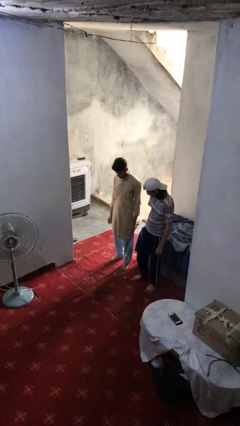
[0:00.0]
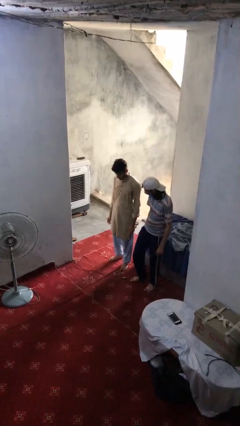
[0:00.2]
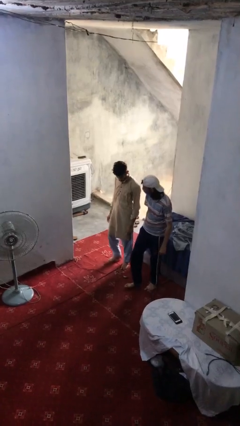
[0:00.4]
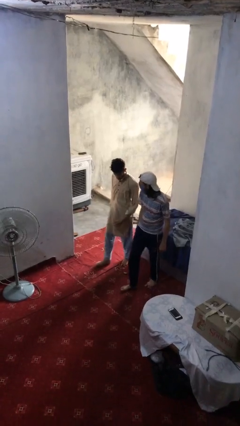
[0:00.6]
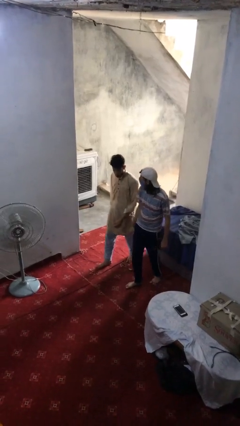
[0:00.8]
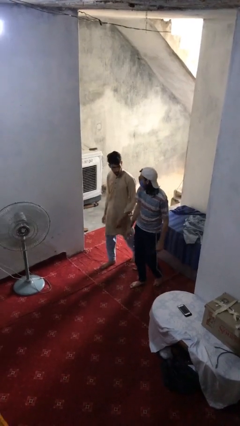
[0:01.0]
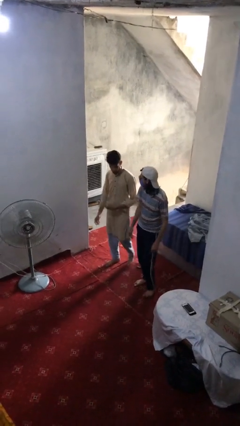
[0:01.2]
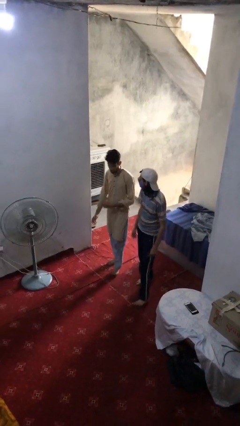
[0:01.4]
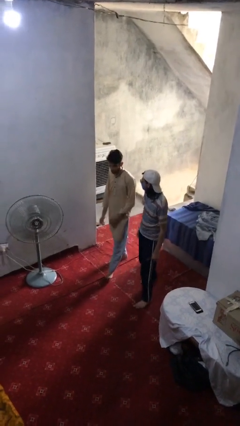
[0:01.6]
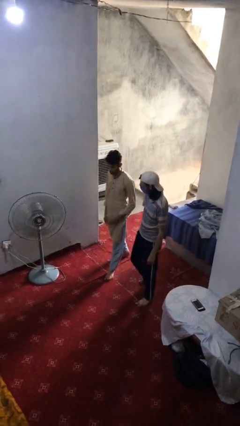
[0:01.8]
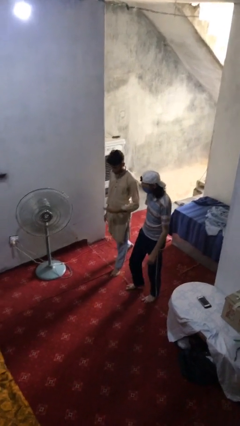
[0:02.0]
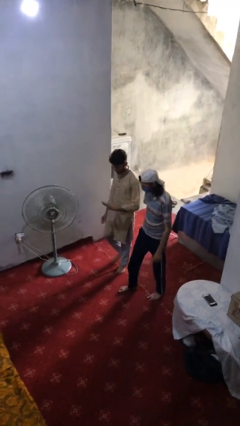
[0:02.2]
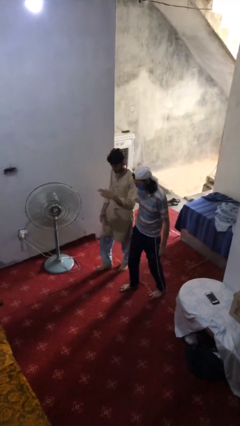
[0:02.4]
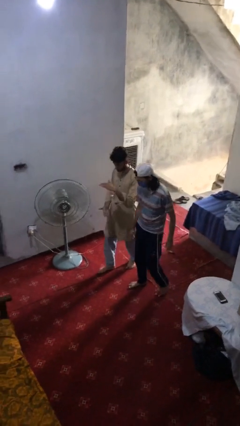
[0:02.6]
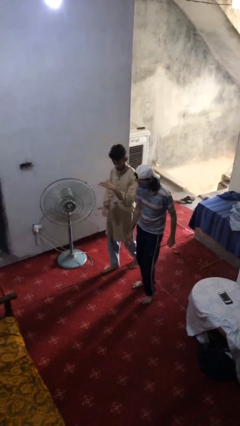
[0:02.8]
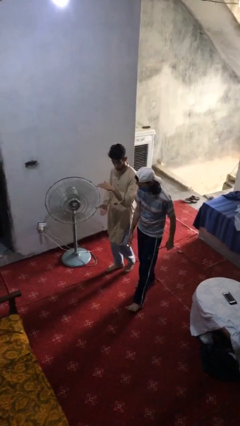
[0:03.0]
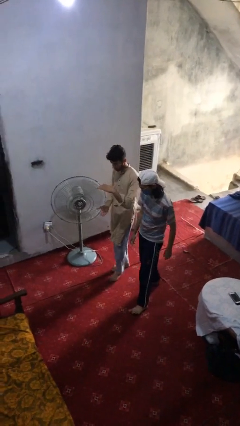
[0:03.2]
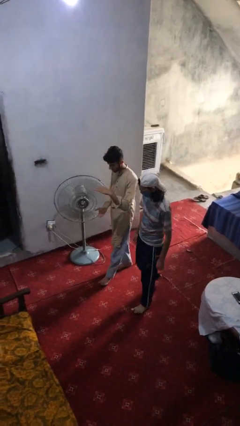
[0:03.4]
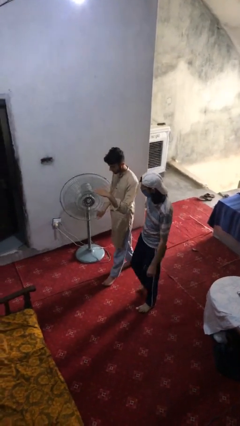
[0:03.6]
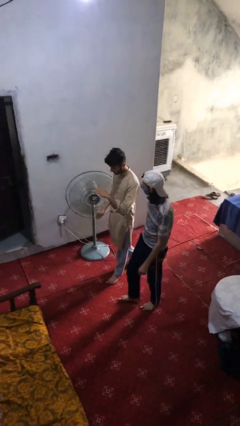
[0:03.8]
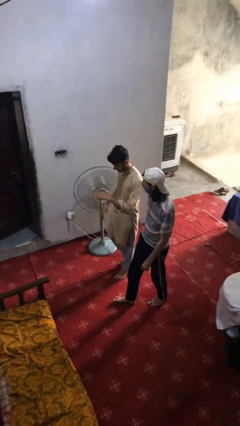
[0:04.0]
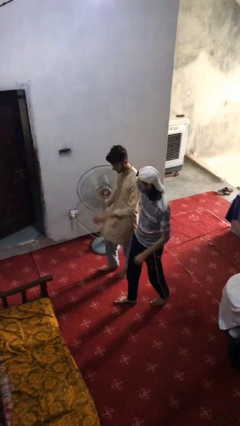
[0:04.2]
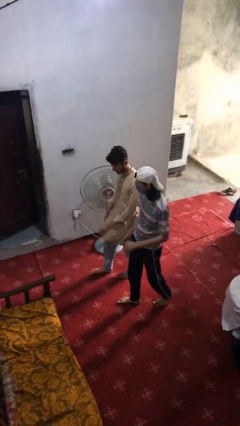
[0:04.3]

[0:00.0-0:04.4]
person talks to person

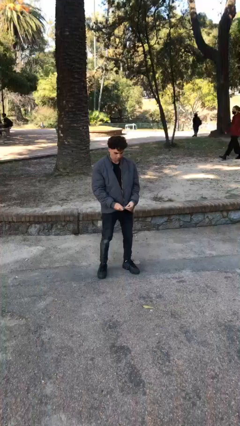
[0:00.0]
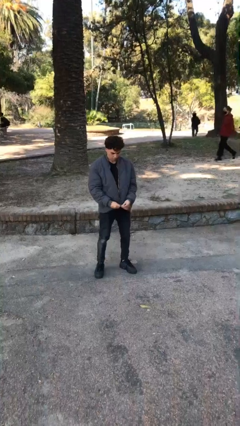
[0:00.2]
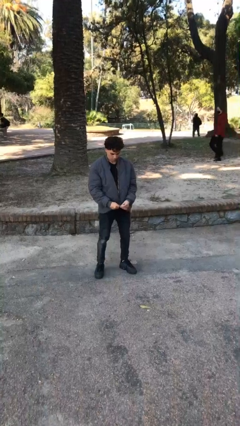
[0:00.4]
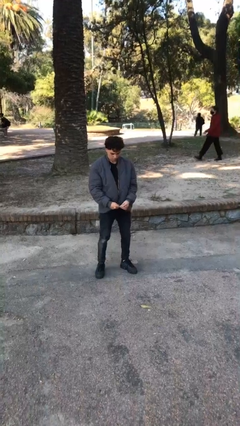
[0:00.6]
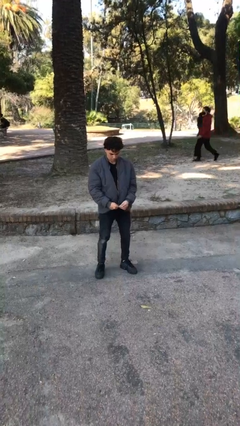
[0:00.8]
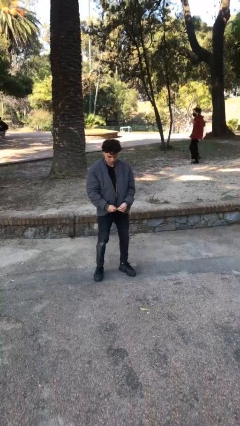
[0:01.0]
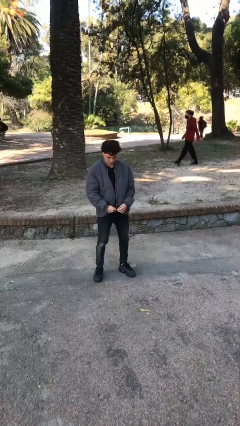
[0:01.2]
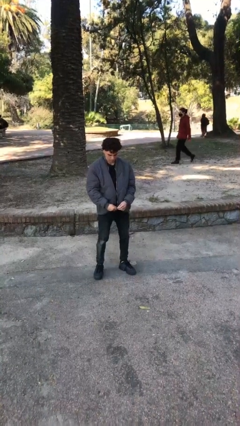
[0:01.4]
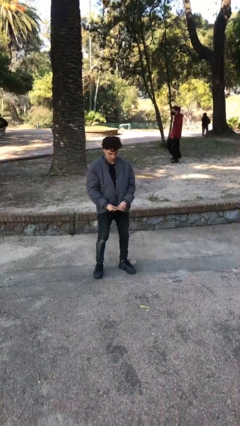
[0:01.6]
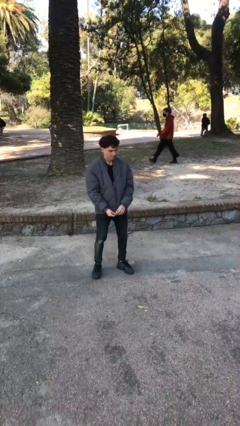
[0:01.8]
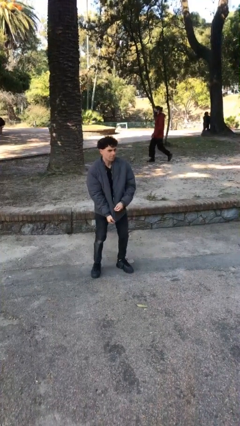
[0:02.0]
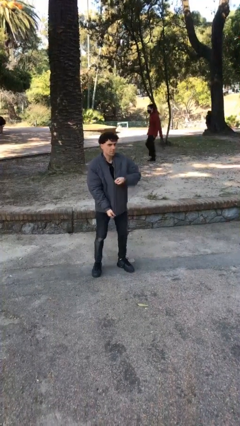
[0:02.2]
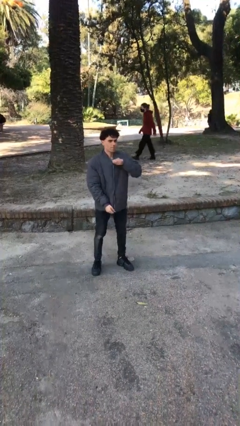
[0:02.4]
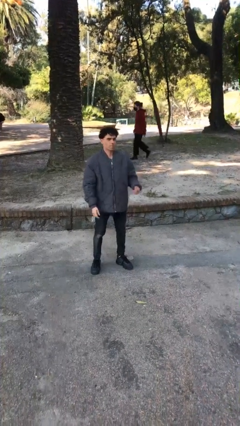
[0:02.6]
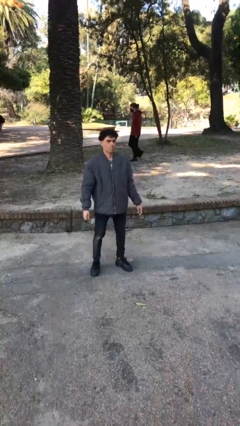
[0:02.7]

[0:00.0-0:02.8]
person zips up jacket

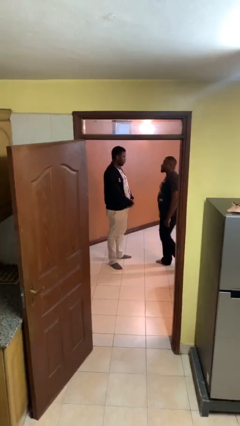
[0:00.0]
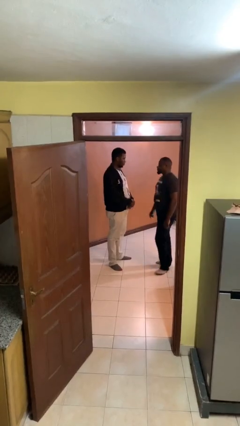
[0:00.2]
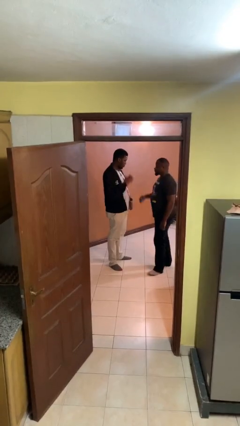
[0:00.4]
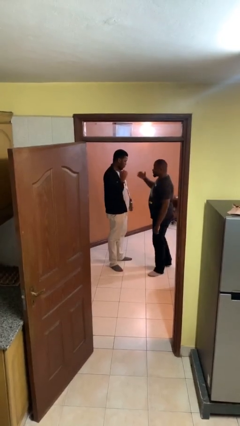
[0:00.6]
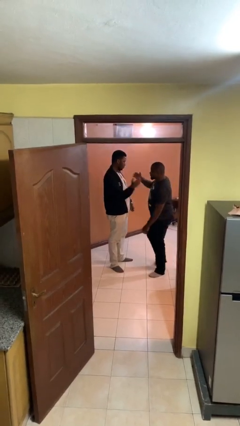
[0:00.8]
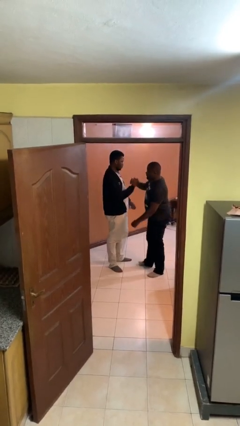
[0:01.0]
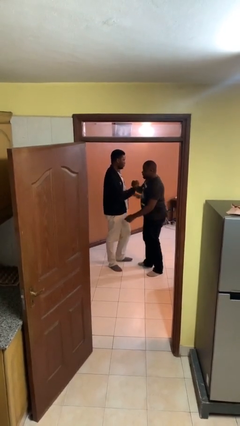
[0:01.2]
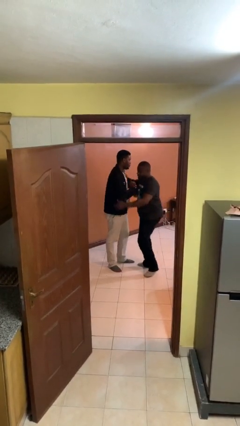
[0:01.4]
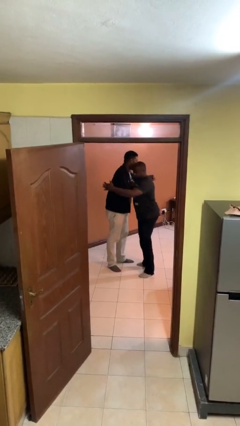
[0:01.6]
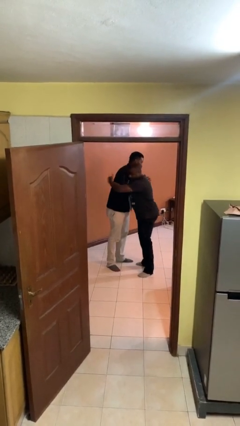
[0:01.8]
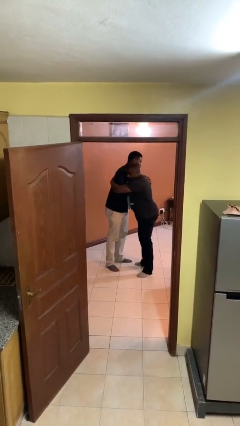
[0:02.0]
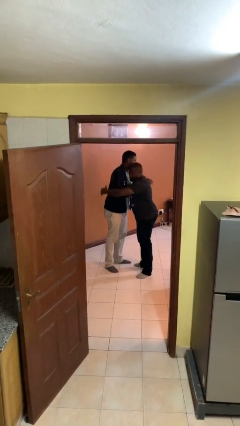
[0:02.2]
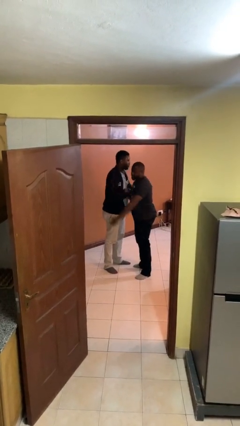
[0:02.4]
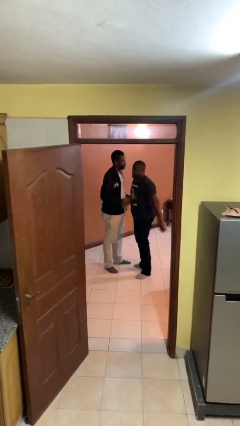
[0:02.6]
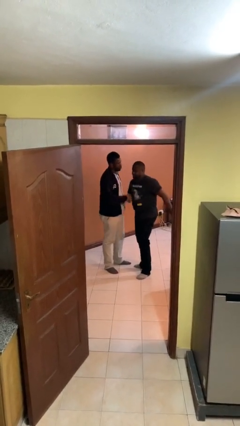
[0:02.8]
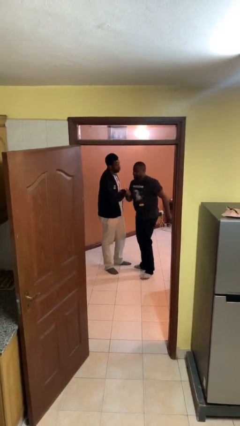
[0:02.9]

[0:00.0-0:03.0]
person embraces person

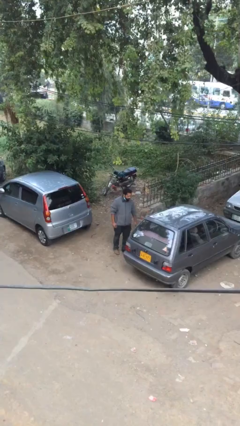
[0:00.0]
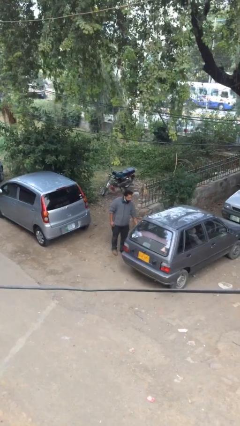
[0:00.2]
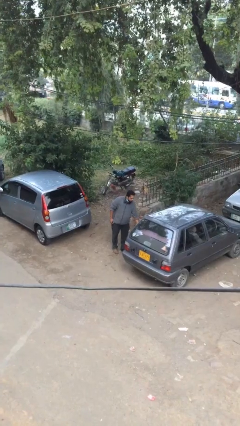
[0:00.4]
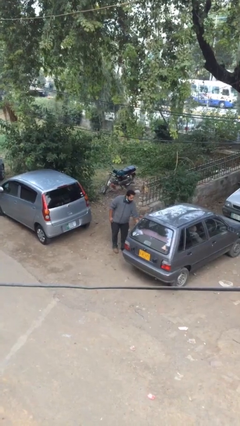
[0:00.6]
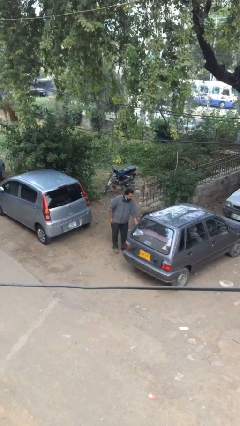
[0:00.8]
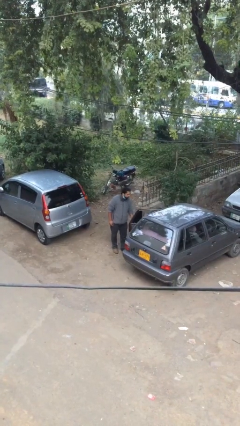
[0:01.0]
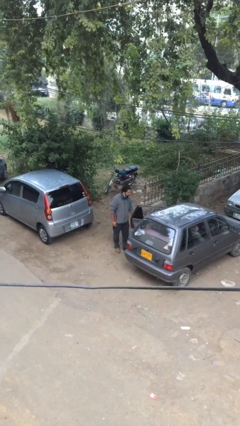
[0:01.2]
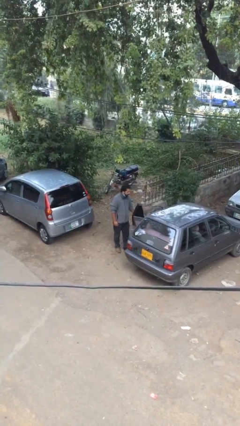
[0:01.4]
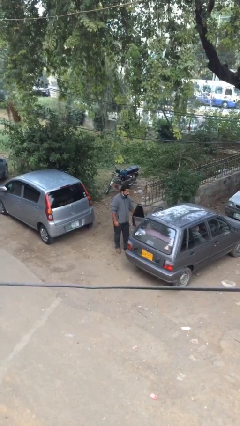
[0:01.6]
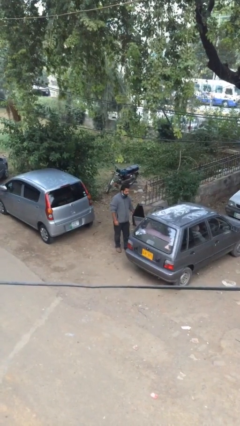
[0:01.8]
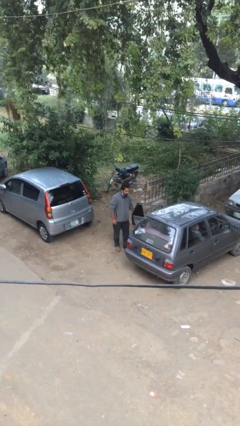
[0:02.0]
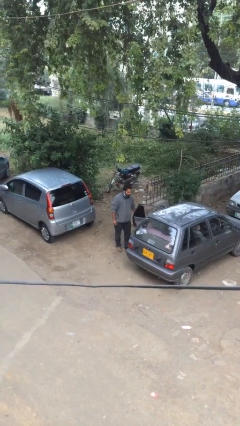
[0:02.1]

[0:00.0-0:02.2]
person opens car door

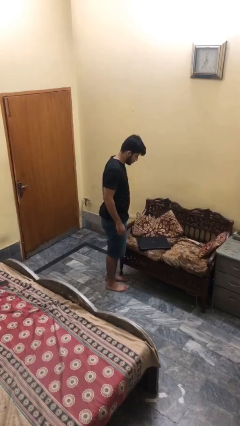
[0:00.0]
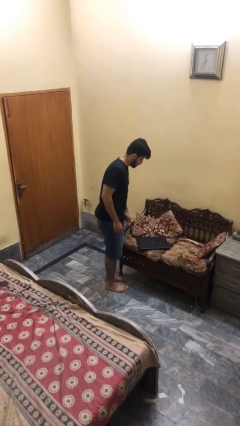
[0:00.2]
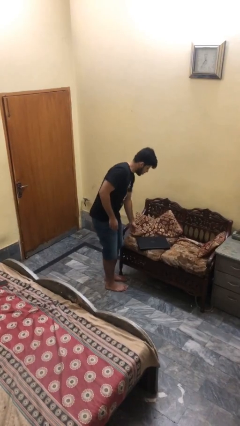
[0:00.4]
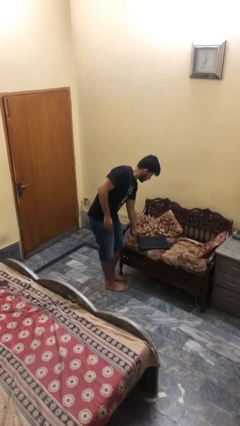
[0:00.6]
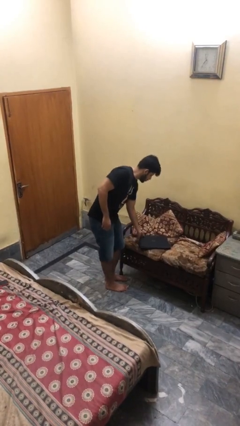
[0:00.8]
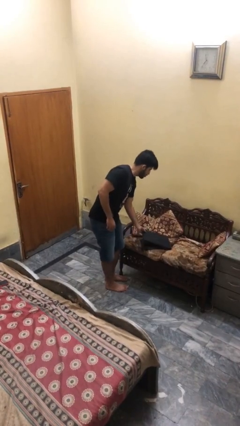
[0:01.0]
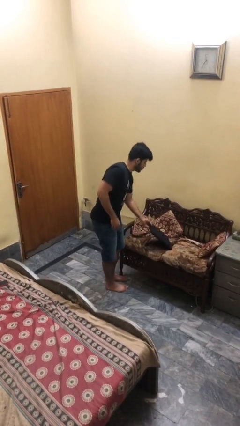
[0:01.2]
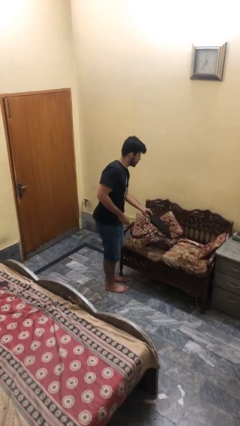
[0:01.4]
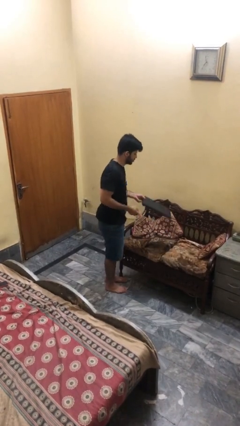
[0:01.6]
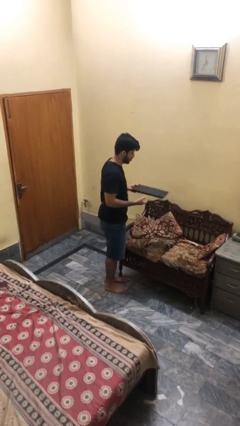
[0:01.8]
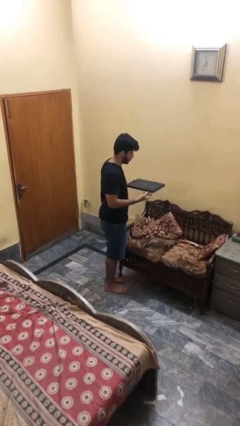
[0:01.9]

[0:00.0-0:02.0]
person picks up object from couch

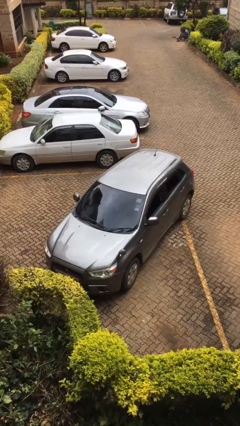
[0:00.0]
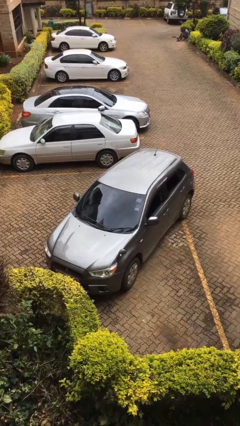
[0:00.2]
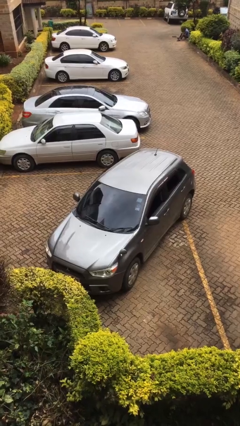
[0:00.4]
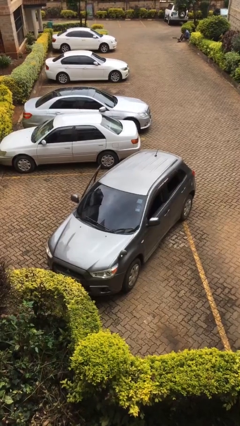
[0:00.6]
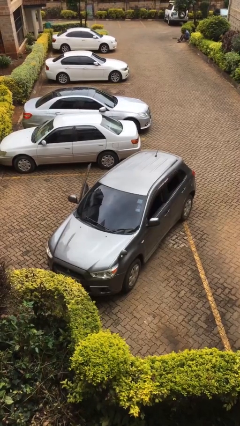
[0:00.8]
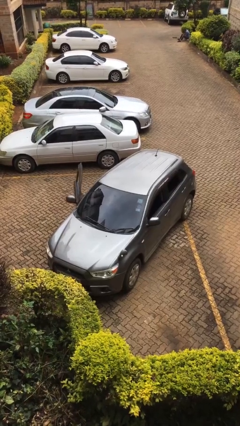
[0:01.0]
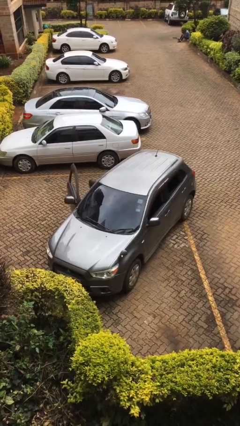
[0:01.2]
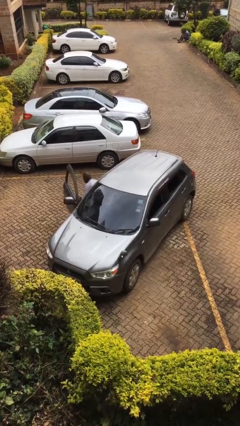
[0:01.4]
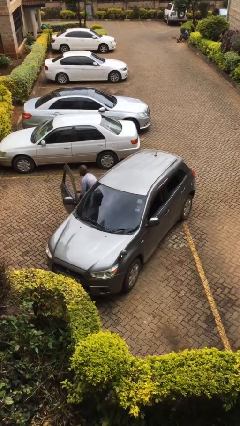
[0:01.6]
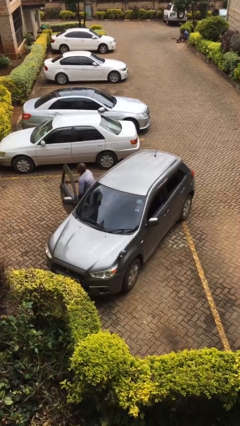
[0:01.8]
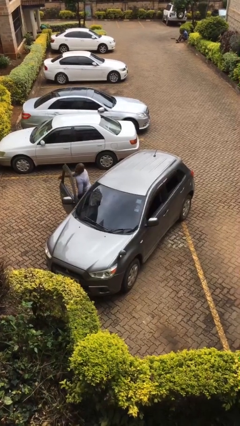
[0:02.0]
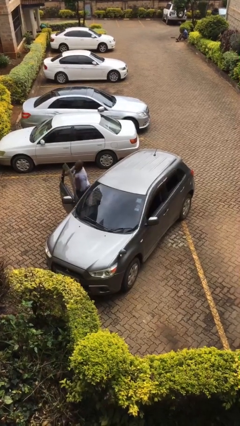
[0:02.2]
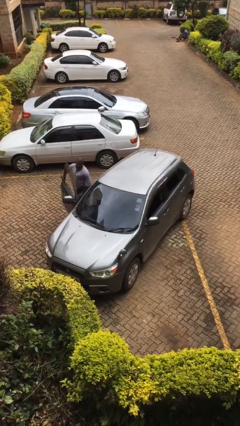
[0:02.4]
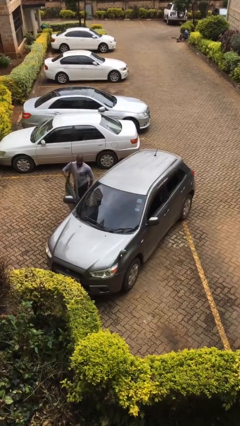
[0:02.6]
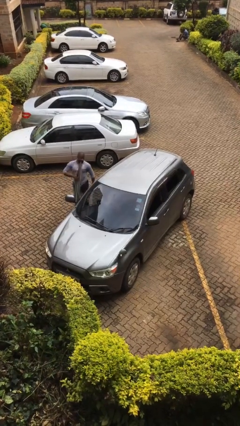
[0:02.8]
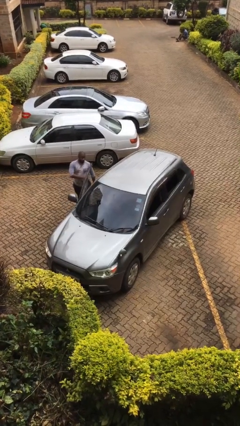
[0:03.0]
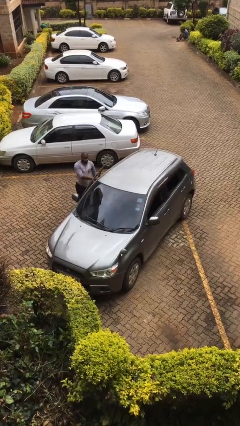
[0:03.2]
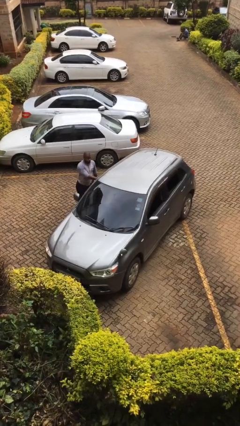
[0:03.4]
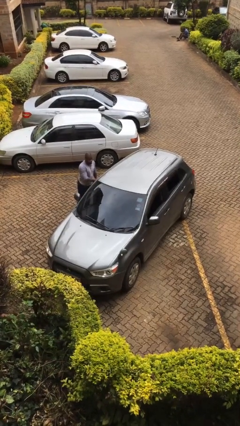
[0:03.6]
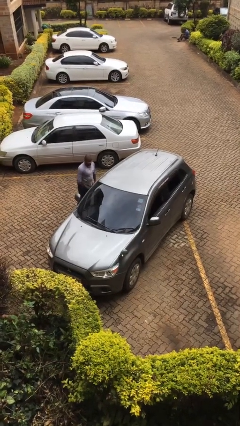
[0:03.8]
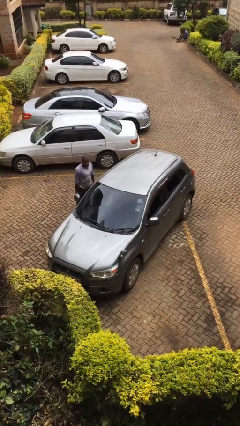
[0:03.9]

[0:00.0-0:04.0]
car drops off person
